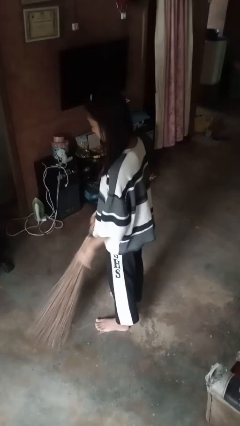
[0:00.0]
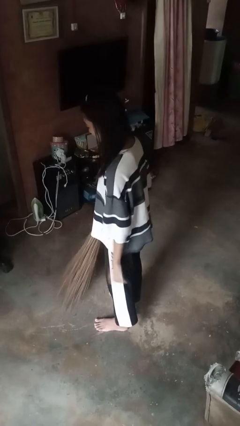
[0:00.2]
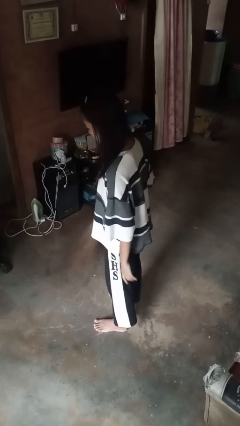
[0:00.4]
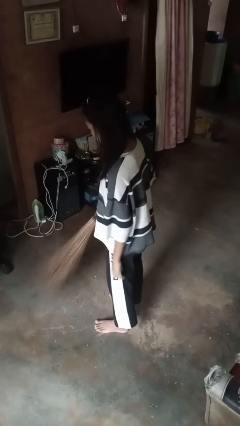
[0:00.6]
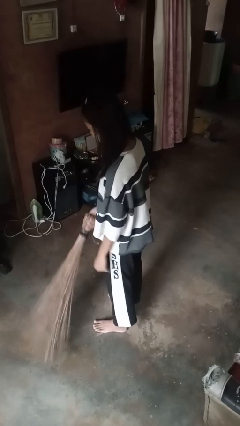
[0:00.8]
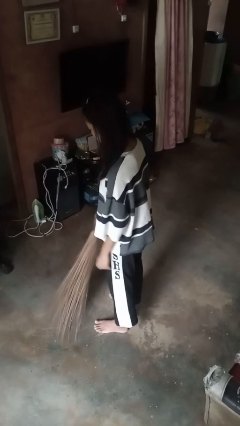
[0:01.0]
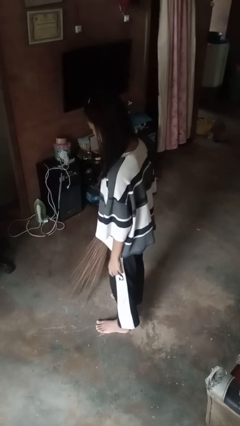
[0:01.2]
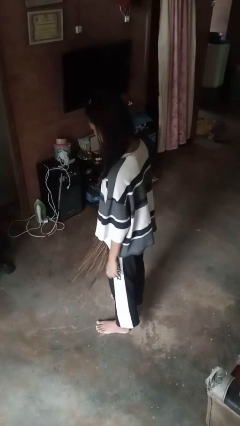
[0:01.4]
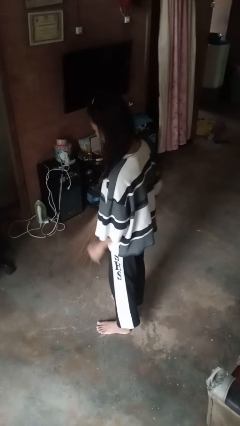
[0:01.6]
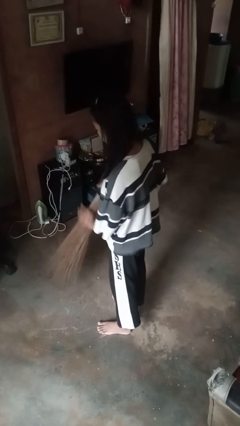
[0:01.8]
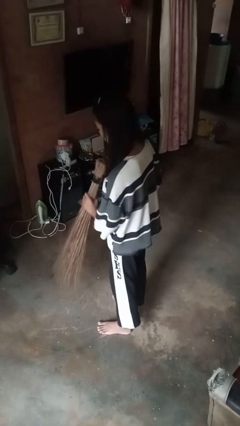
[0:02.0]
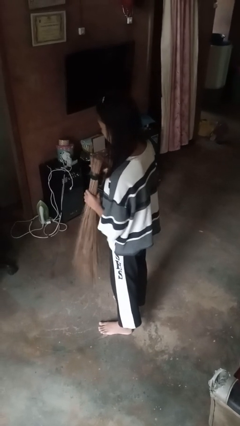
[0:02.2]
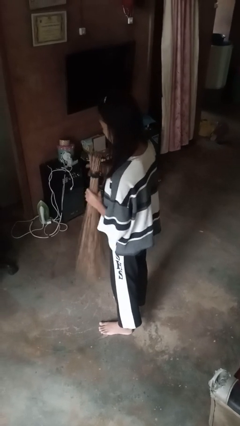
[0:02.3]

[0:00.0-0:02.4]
person sweeps floor

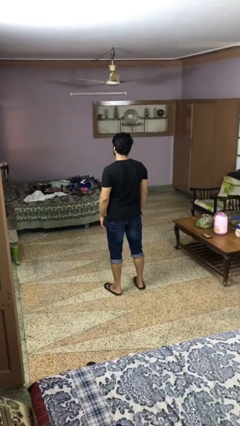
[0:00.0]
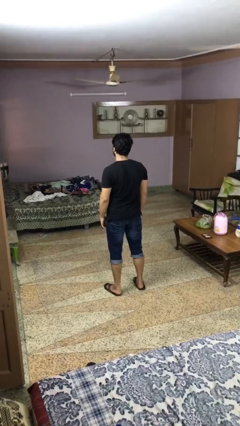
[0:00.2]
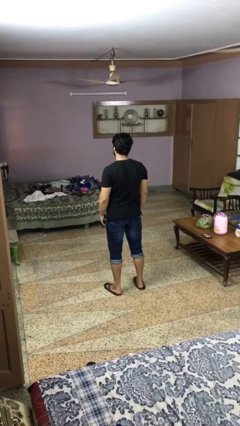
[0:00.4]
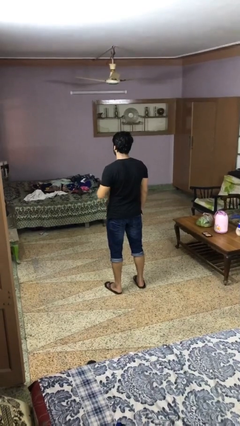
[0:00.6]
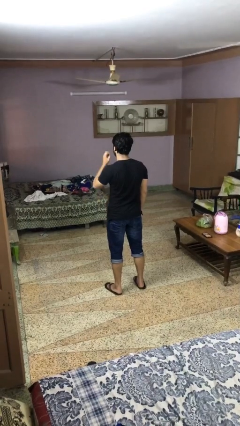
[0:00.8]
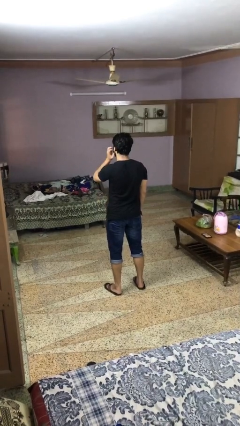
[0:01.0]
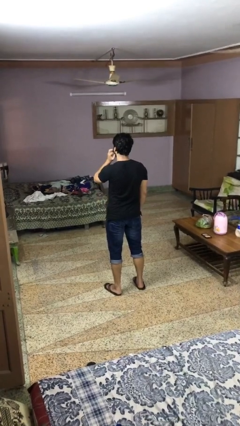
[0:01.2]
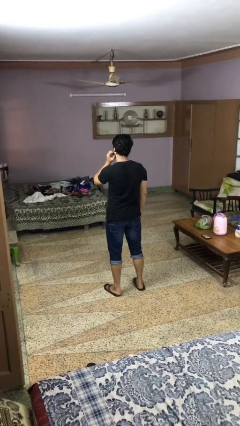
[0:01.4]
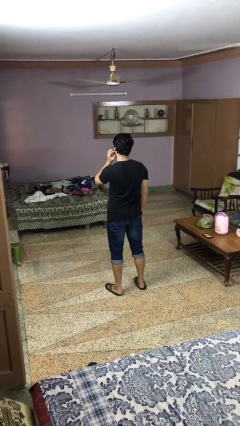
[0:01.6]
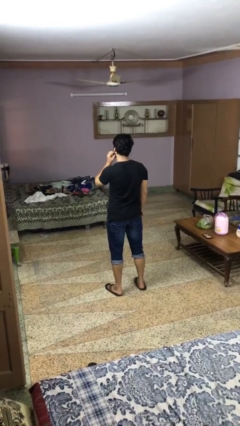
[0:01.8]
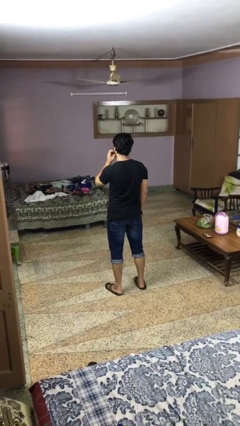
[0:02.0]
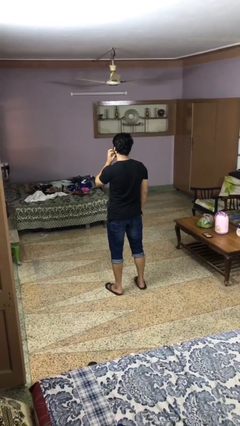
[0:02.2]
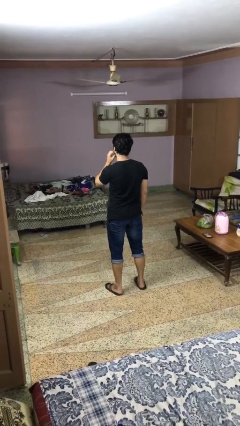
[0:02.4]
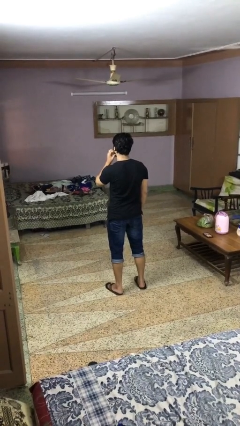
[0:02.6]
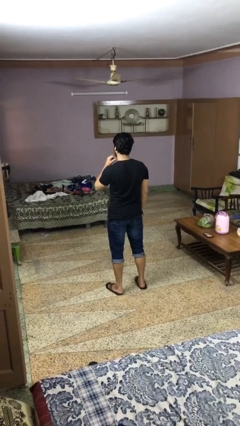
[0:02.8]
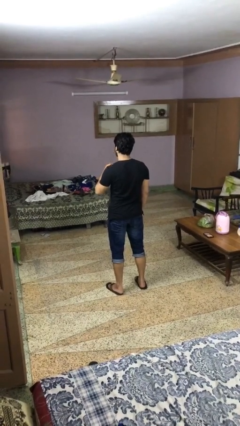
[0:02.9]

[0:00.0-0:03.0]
person scratches face

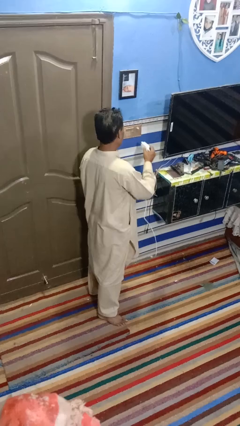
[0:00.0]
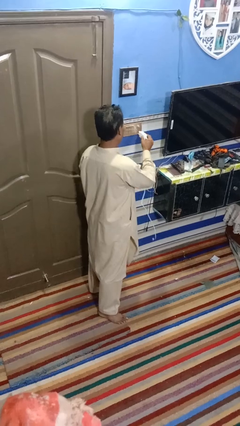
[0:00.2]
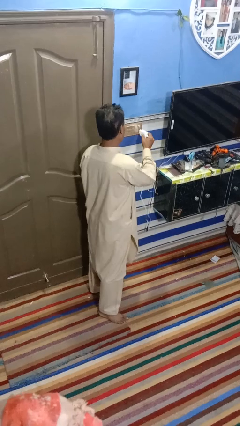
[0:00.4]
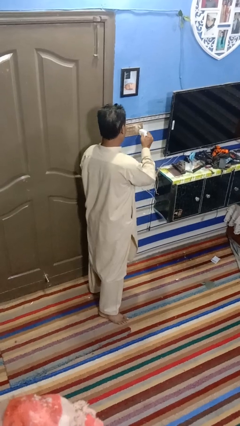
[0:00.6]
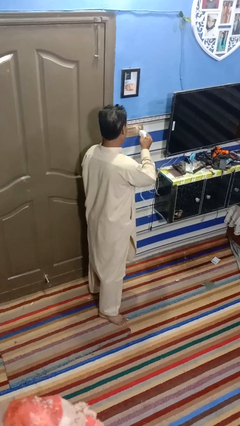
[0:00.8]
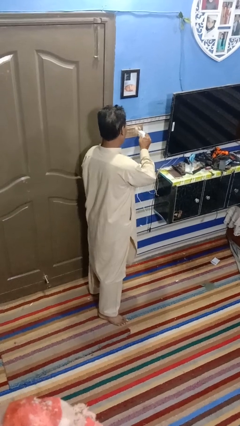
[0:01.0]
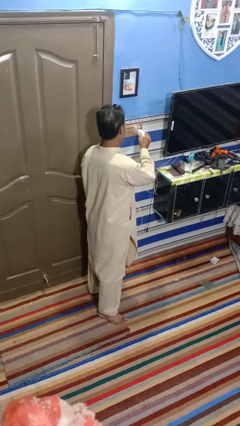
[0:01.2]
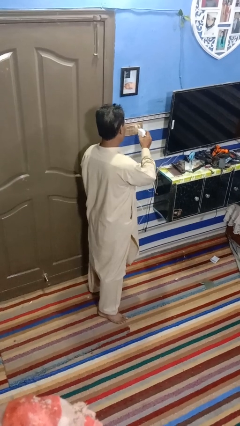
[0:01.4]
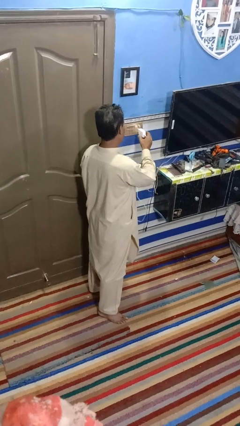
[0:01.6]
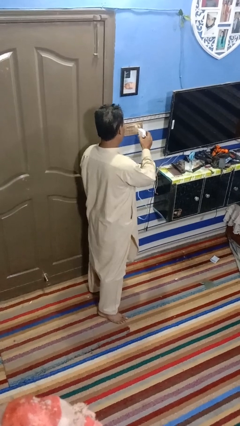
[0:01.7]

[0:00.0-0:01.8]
person plugs into electrical socket

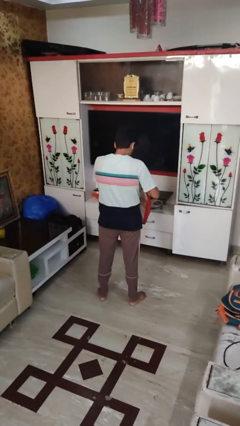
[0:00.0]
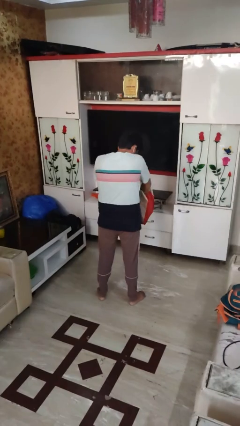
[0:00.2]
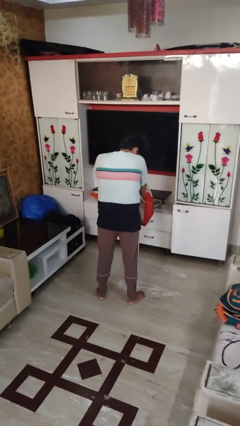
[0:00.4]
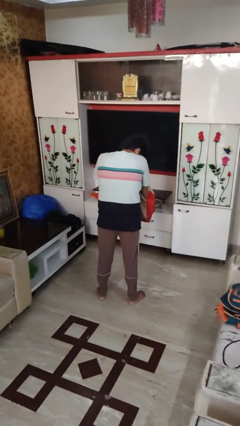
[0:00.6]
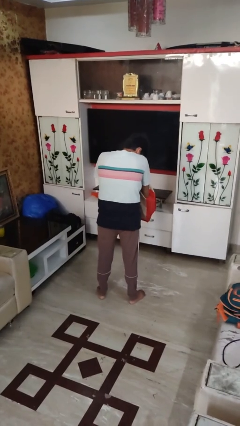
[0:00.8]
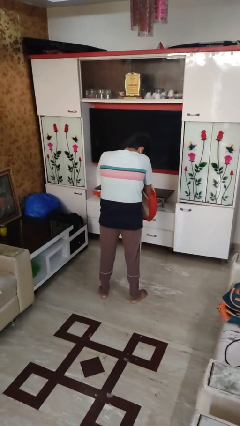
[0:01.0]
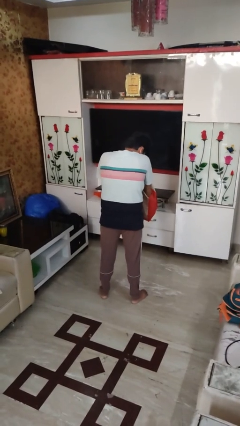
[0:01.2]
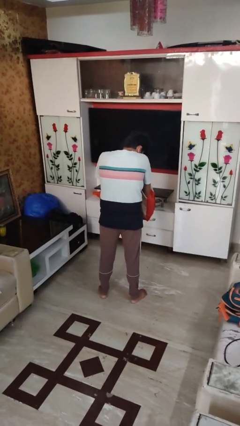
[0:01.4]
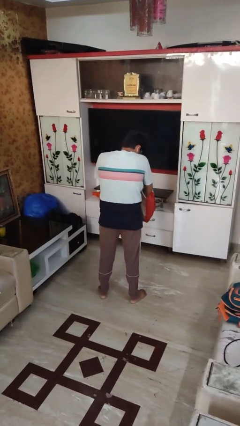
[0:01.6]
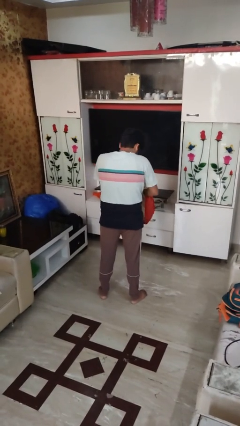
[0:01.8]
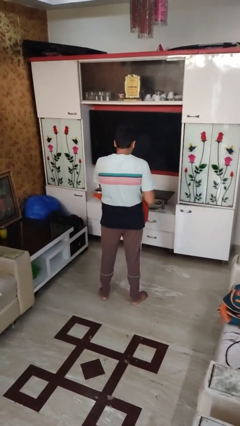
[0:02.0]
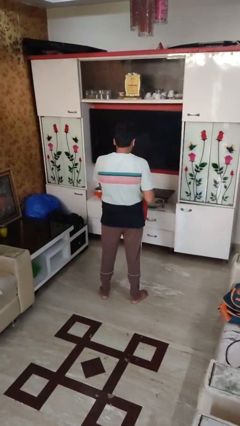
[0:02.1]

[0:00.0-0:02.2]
person searches in bag

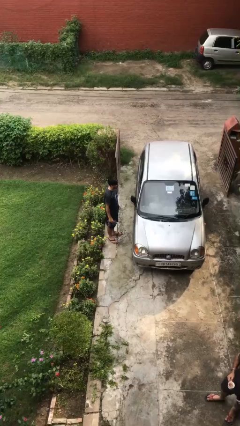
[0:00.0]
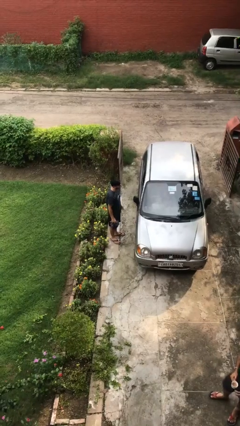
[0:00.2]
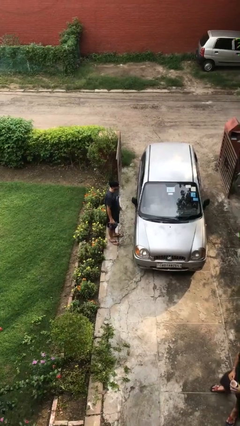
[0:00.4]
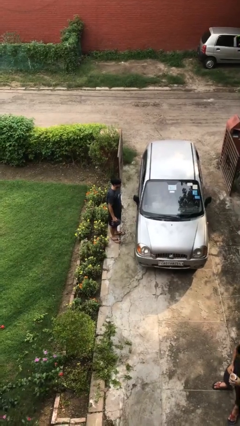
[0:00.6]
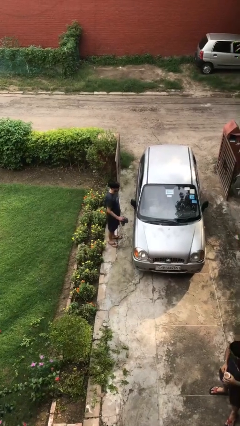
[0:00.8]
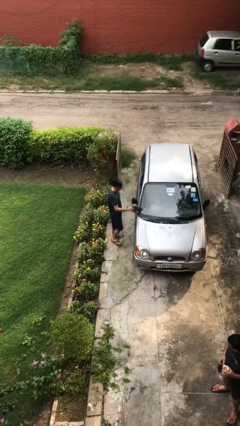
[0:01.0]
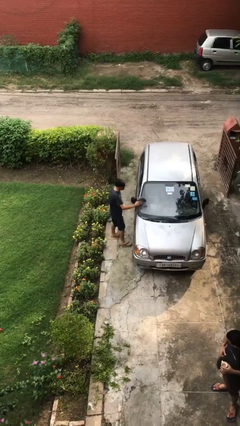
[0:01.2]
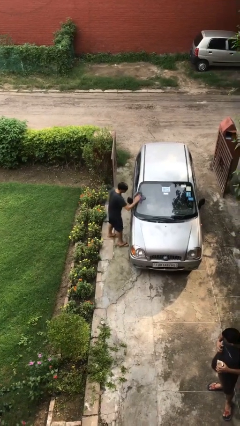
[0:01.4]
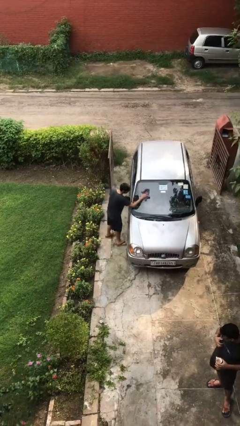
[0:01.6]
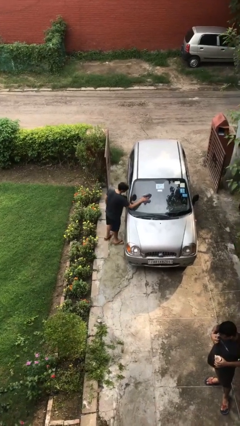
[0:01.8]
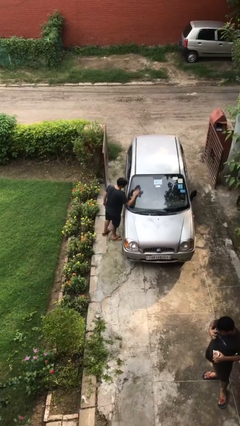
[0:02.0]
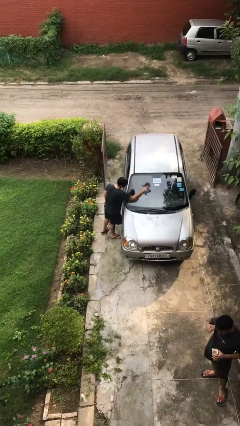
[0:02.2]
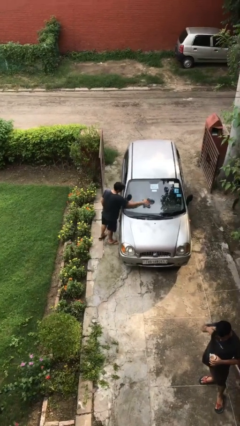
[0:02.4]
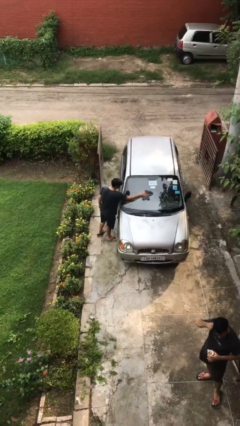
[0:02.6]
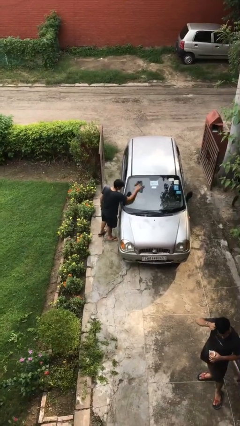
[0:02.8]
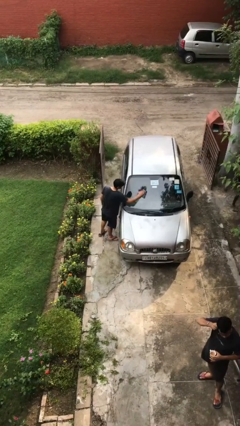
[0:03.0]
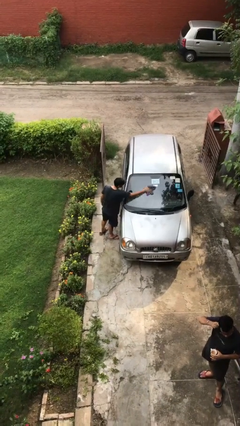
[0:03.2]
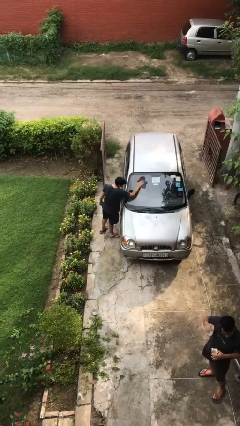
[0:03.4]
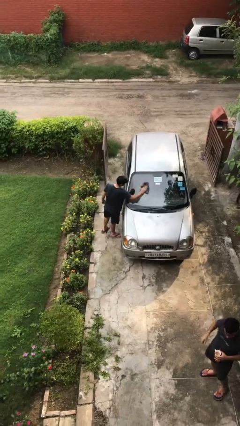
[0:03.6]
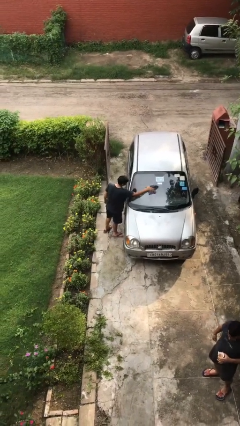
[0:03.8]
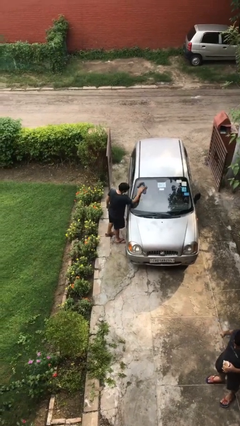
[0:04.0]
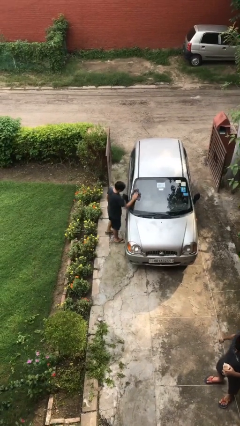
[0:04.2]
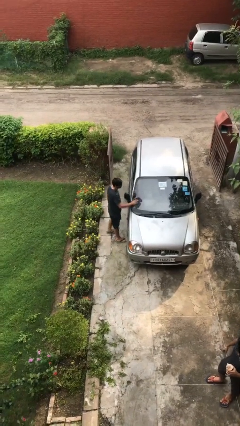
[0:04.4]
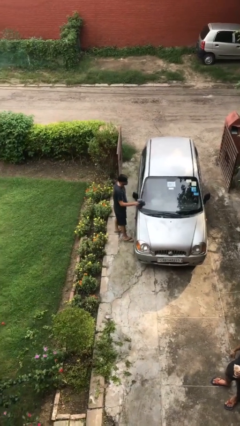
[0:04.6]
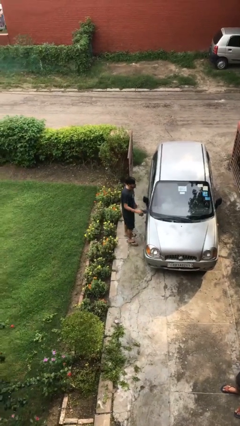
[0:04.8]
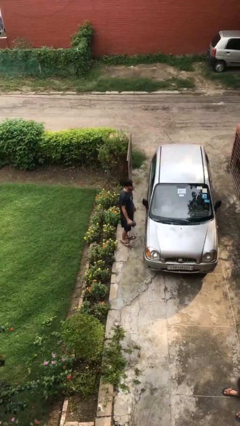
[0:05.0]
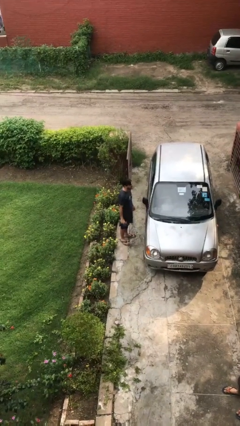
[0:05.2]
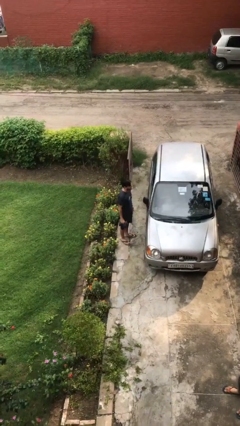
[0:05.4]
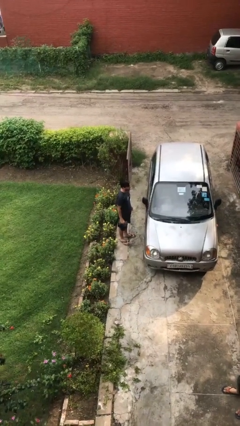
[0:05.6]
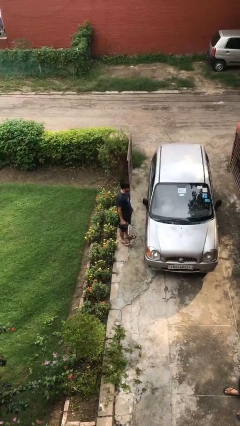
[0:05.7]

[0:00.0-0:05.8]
person polishes car with rag

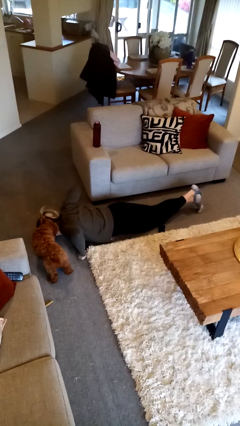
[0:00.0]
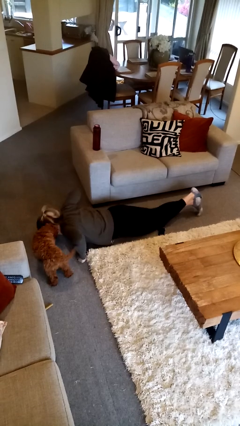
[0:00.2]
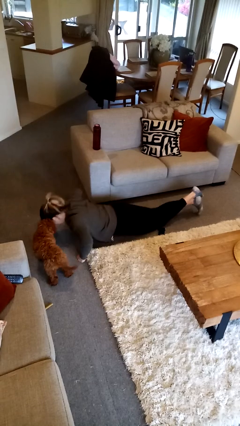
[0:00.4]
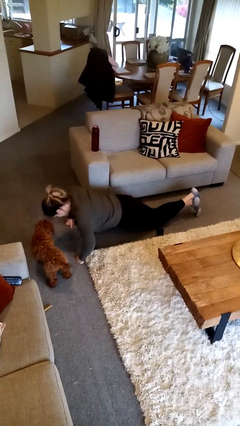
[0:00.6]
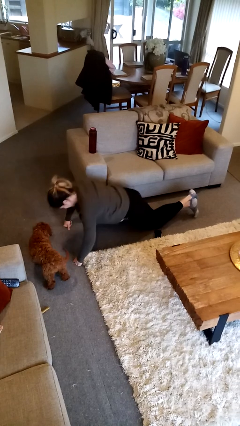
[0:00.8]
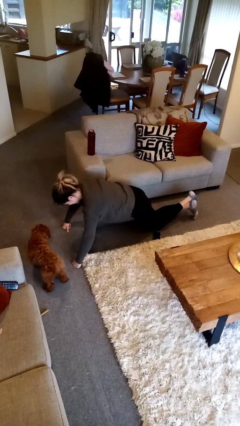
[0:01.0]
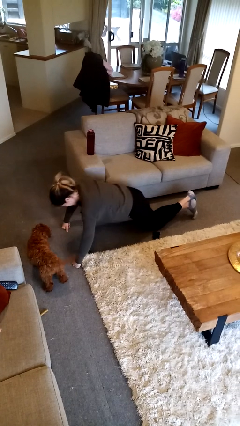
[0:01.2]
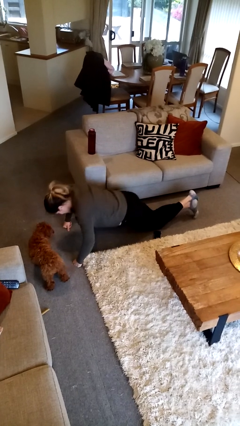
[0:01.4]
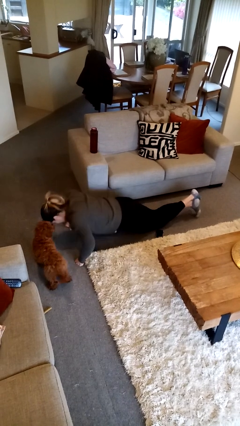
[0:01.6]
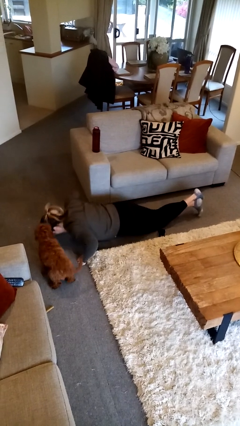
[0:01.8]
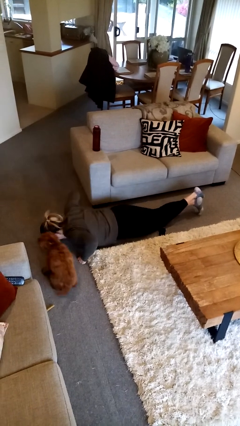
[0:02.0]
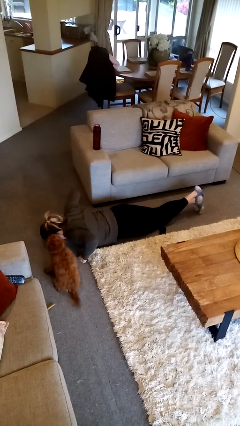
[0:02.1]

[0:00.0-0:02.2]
person exercises with pushup

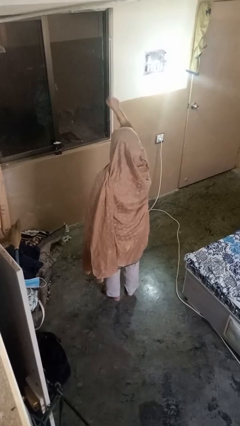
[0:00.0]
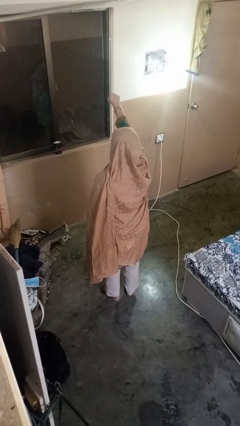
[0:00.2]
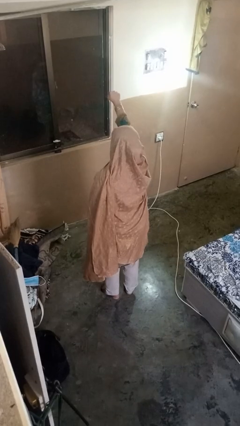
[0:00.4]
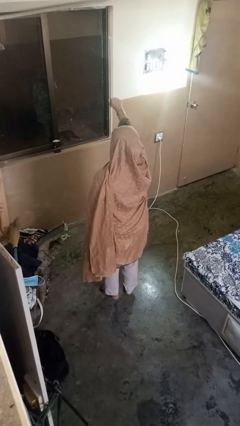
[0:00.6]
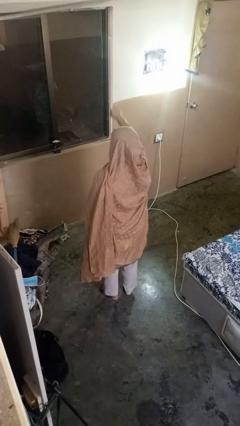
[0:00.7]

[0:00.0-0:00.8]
person punches
